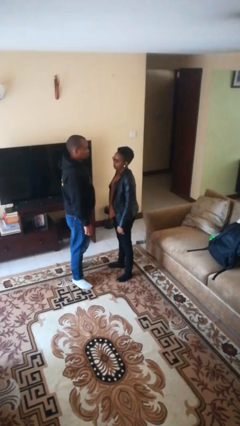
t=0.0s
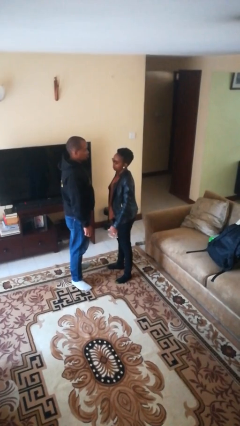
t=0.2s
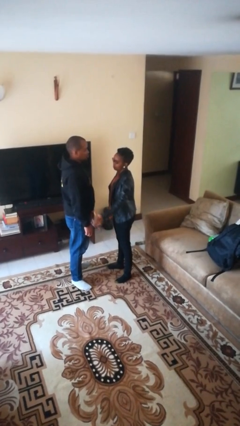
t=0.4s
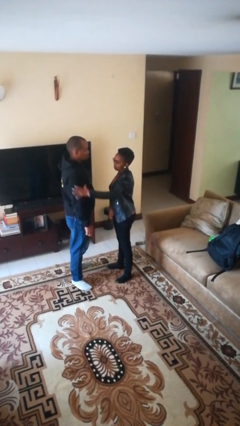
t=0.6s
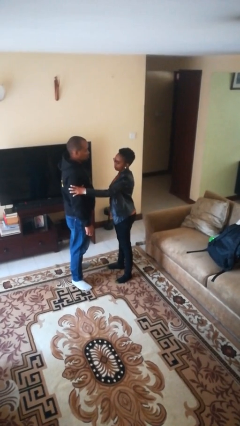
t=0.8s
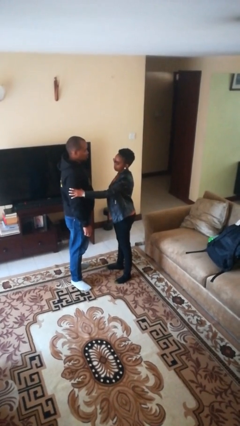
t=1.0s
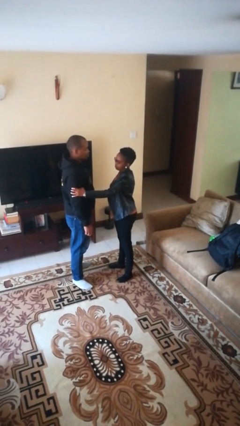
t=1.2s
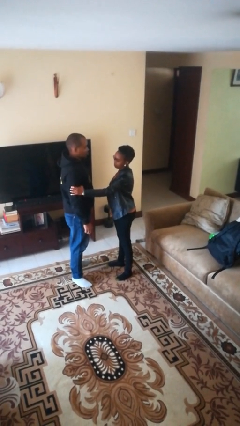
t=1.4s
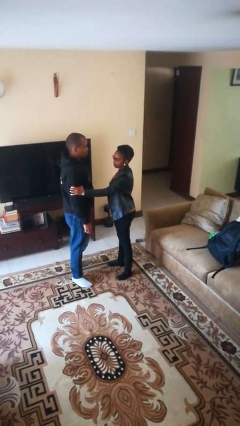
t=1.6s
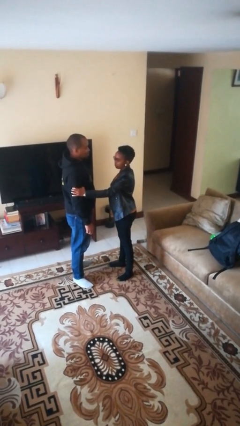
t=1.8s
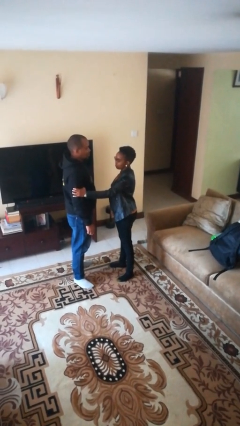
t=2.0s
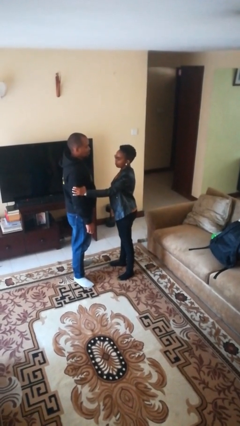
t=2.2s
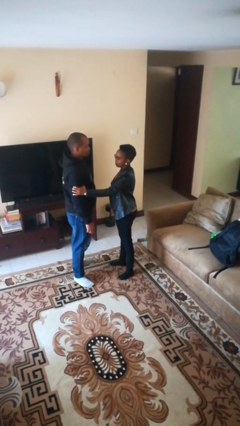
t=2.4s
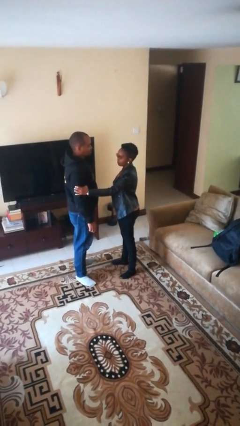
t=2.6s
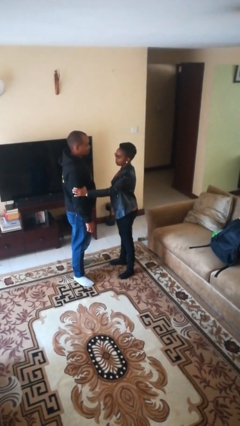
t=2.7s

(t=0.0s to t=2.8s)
person grabs person by bicep

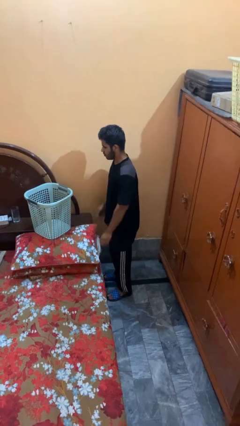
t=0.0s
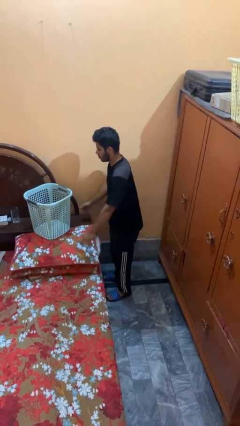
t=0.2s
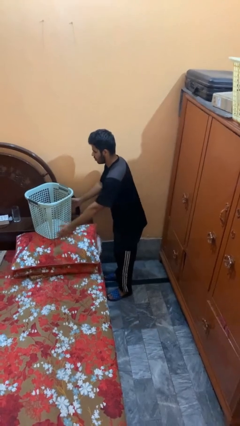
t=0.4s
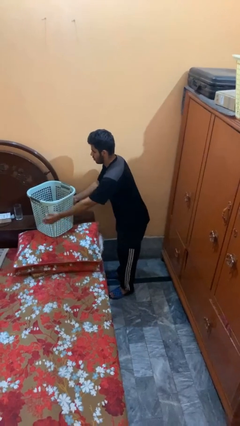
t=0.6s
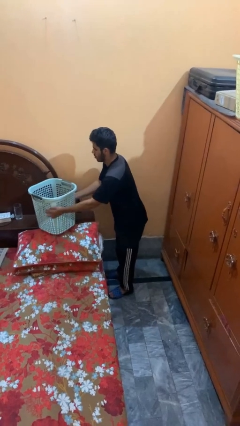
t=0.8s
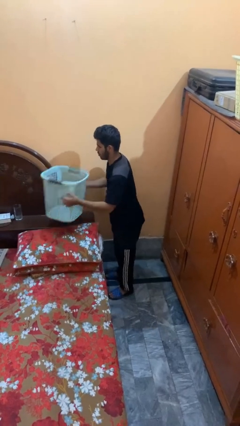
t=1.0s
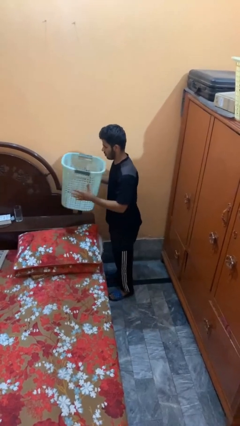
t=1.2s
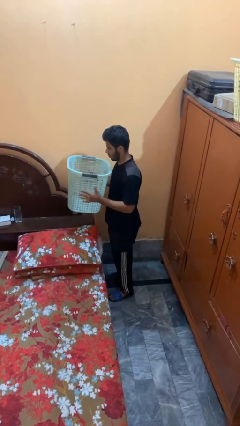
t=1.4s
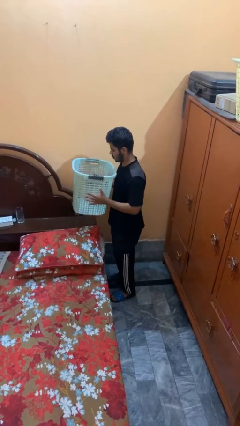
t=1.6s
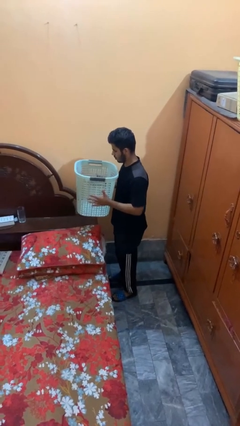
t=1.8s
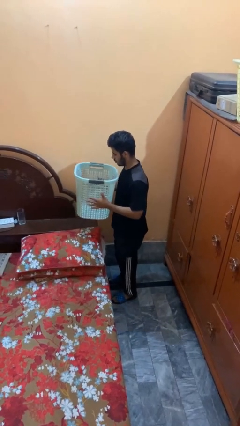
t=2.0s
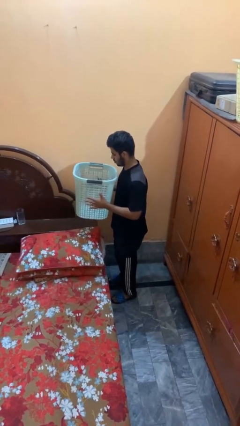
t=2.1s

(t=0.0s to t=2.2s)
person picks up object from bed

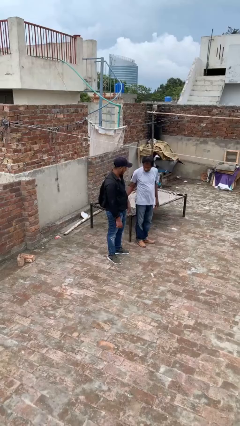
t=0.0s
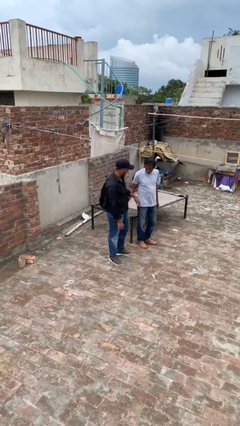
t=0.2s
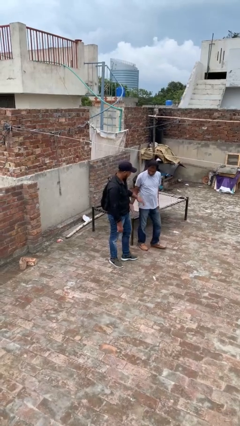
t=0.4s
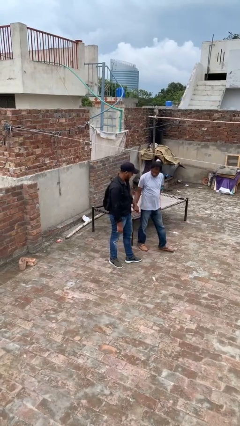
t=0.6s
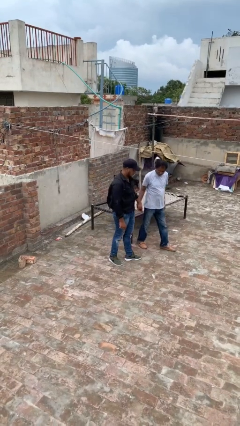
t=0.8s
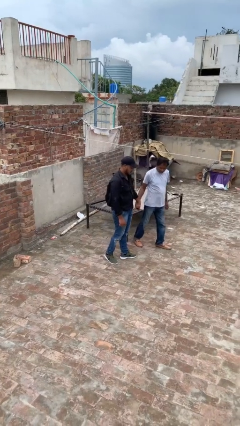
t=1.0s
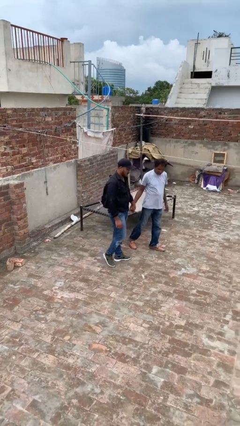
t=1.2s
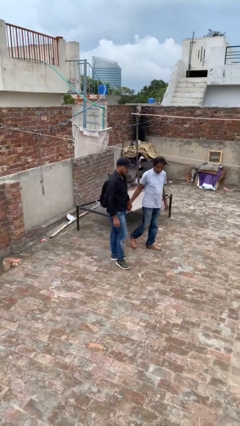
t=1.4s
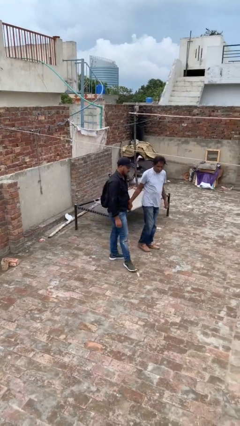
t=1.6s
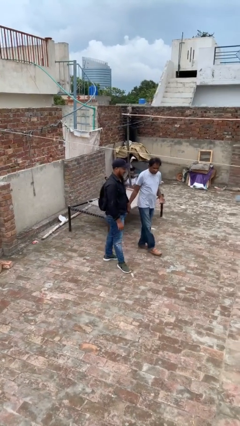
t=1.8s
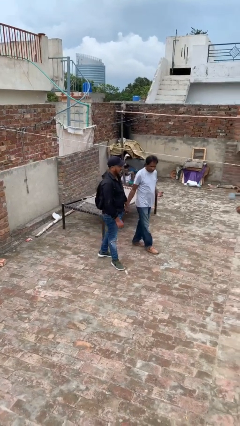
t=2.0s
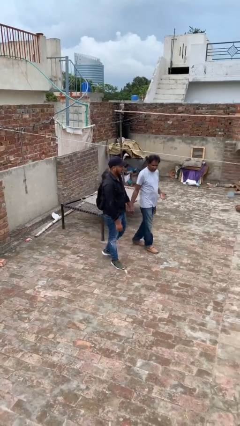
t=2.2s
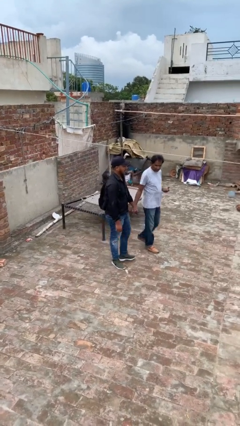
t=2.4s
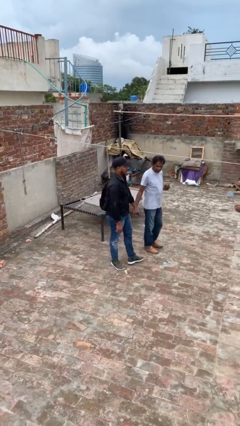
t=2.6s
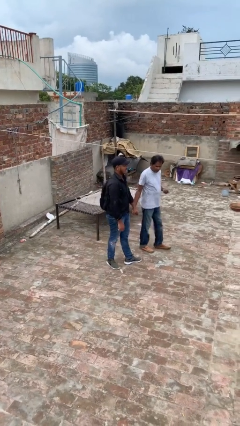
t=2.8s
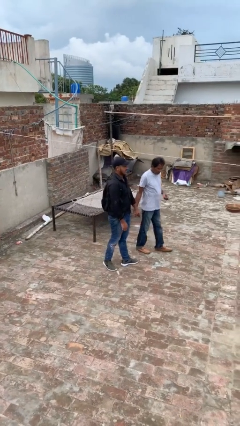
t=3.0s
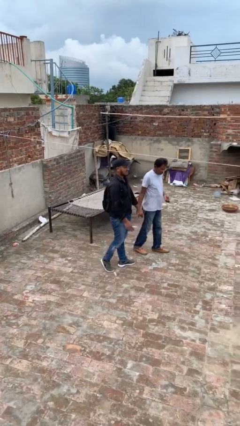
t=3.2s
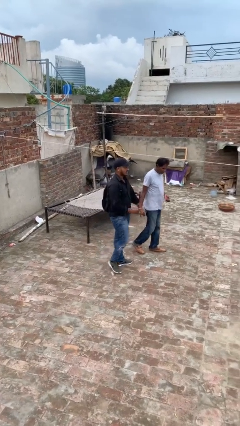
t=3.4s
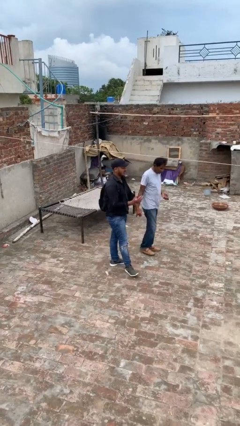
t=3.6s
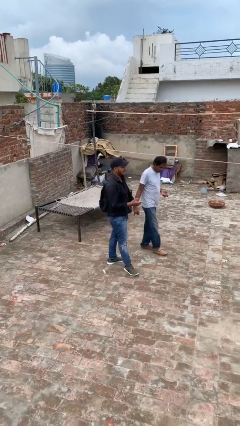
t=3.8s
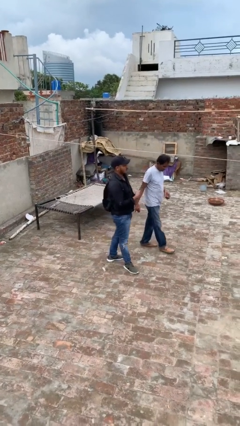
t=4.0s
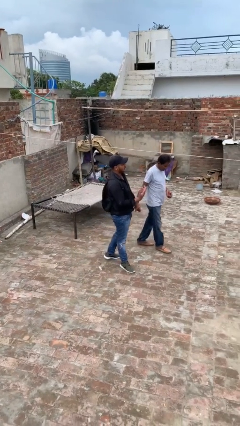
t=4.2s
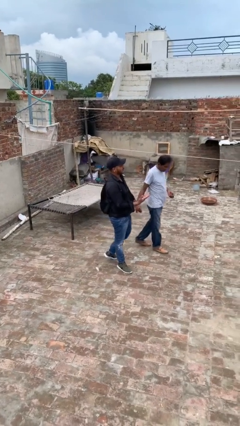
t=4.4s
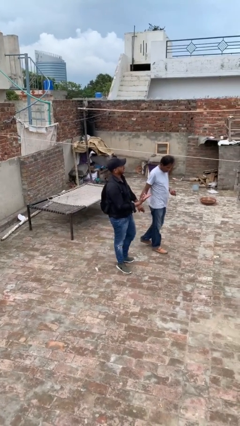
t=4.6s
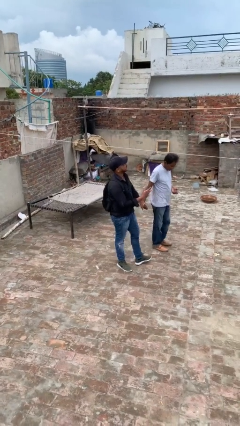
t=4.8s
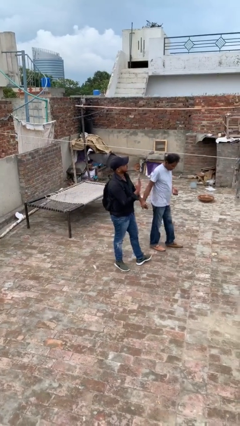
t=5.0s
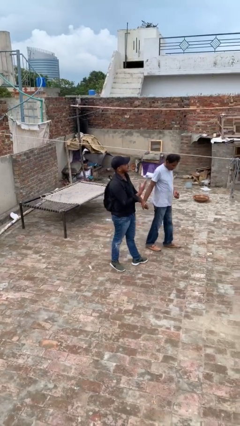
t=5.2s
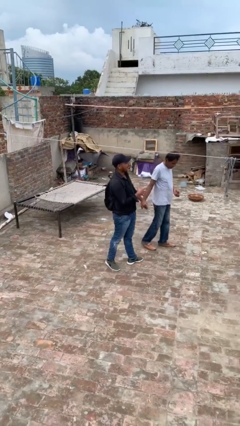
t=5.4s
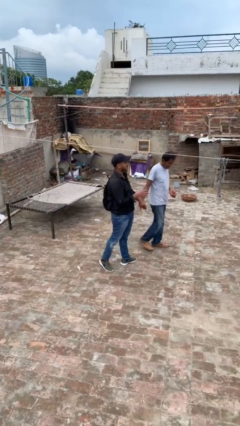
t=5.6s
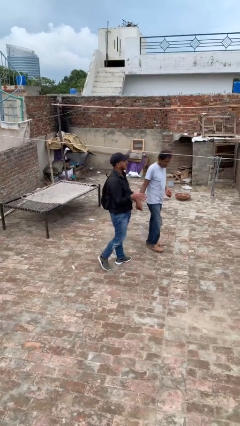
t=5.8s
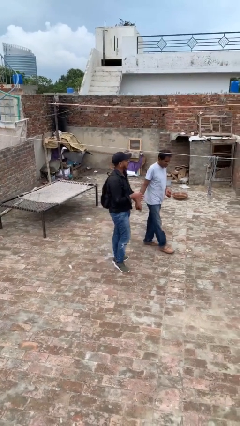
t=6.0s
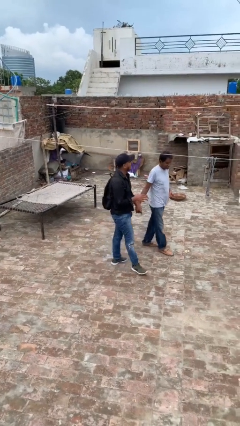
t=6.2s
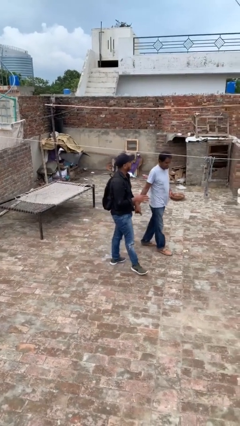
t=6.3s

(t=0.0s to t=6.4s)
person holds hand

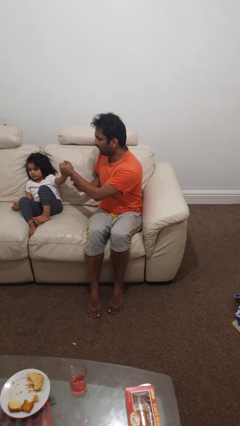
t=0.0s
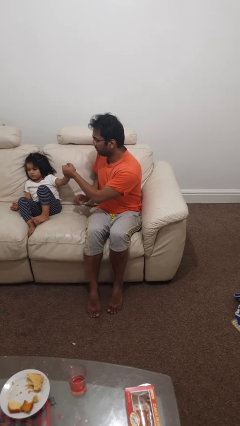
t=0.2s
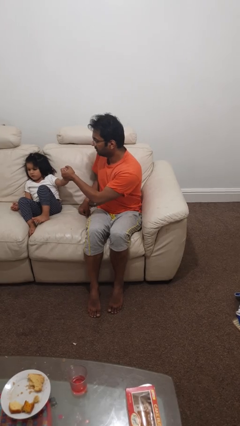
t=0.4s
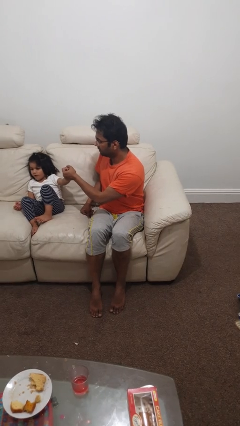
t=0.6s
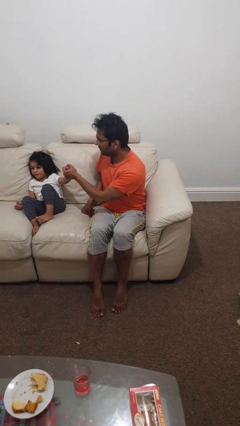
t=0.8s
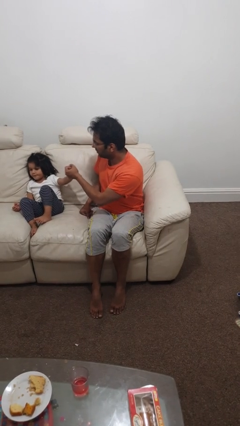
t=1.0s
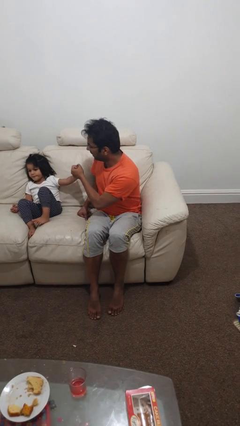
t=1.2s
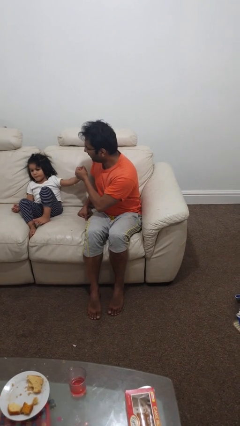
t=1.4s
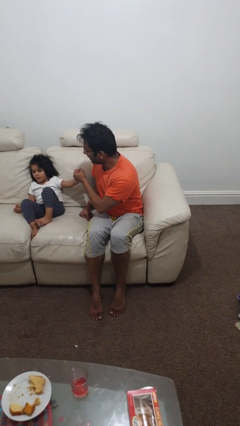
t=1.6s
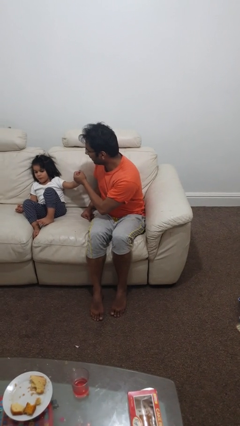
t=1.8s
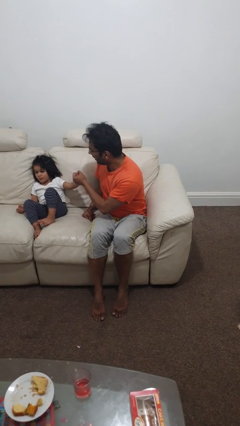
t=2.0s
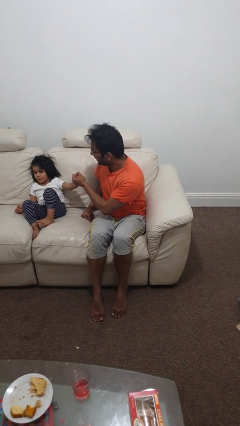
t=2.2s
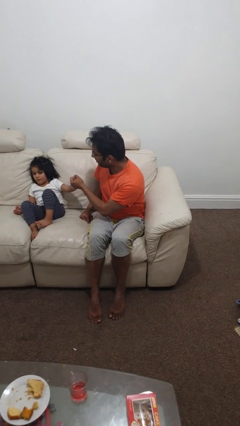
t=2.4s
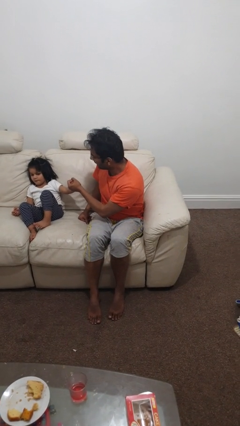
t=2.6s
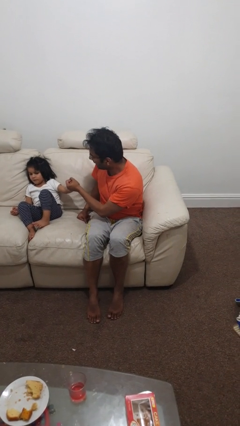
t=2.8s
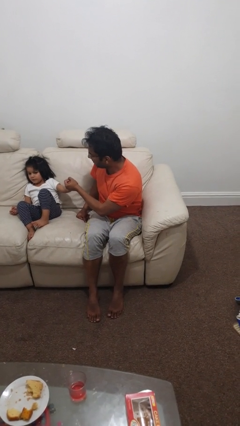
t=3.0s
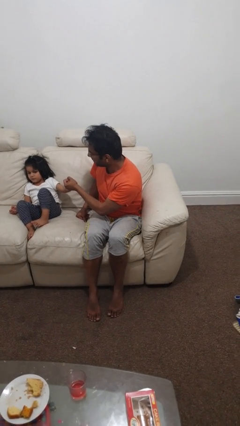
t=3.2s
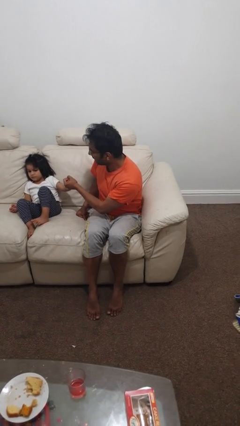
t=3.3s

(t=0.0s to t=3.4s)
person highfives hand

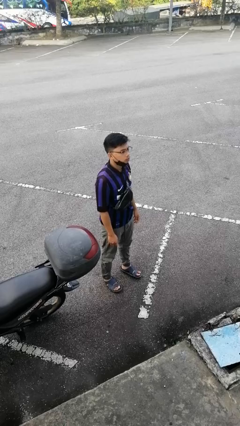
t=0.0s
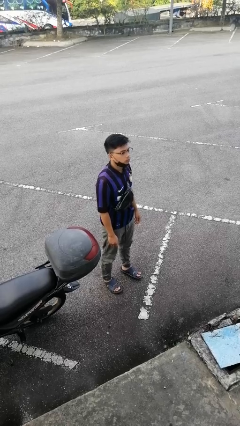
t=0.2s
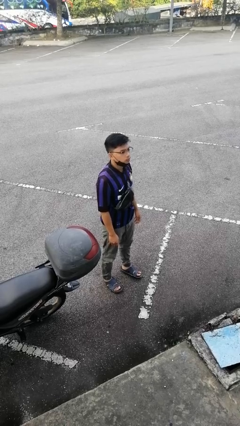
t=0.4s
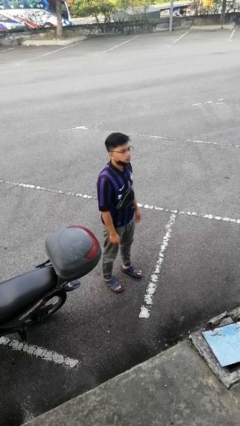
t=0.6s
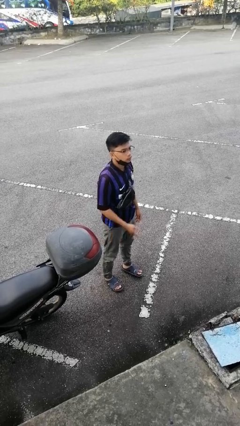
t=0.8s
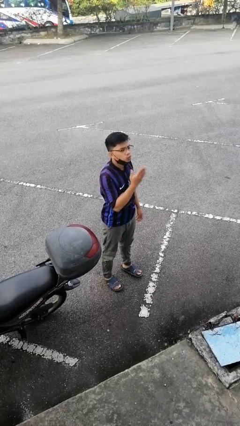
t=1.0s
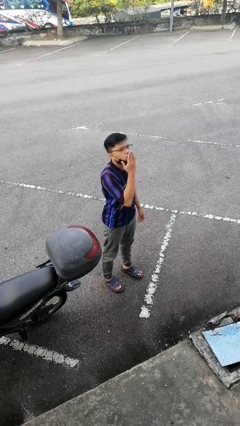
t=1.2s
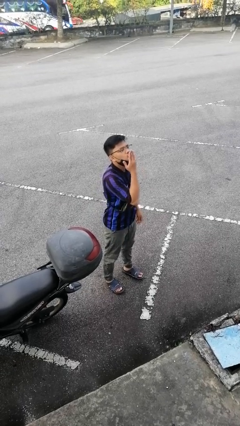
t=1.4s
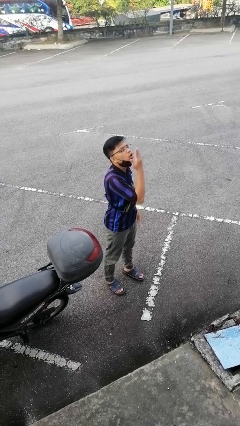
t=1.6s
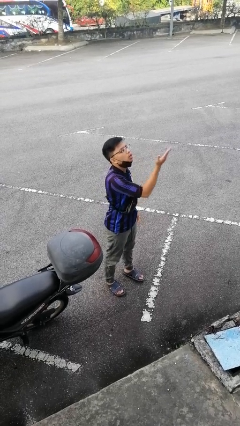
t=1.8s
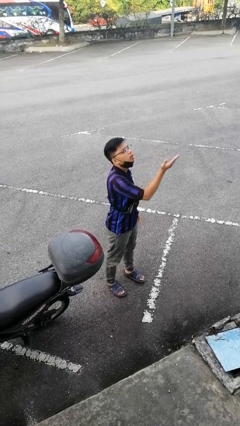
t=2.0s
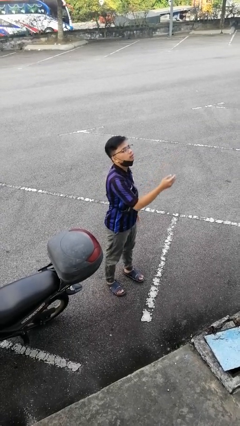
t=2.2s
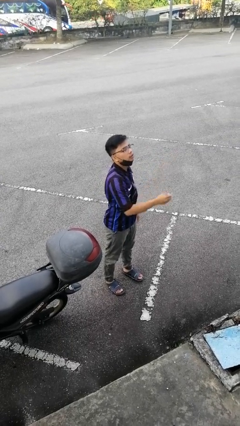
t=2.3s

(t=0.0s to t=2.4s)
person gestures blow kiss

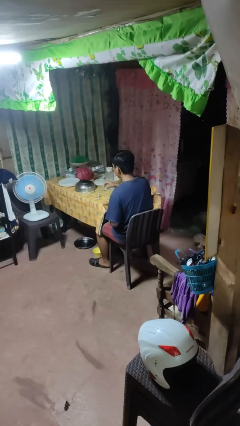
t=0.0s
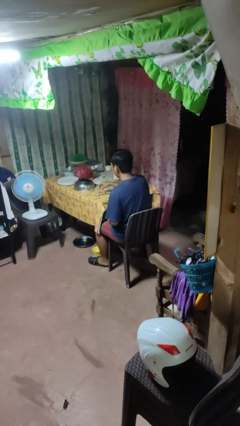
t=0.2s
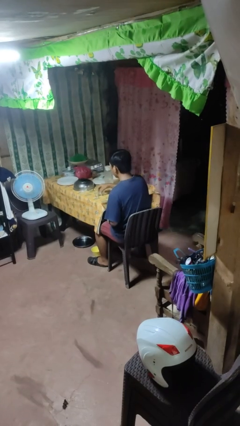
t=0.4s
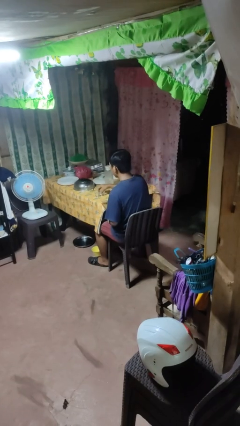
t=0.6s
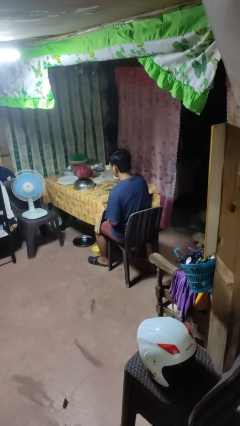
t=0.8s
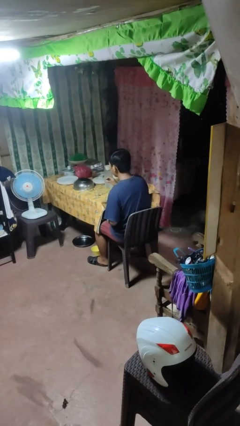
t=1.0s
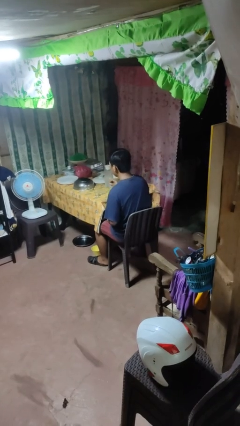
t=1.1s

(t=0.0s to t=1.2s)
person puts down object on table
